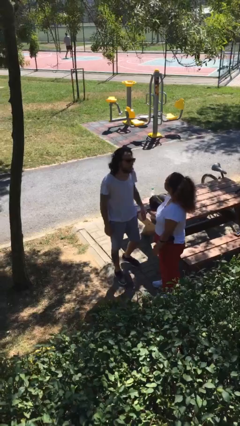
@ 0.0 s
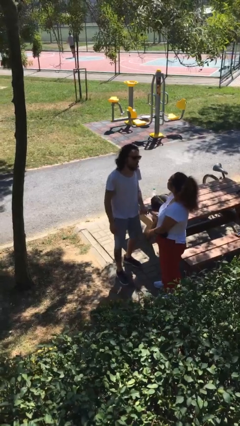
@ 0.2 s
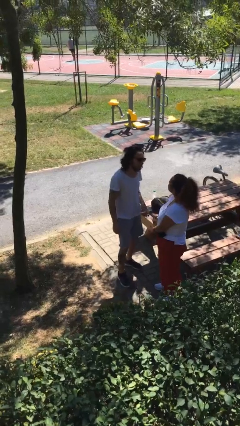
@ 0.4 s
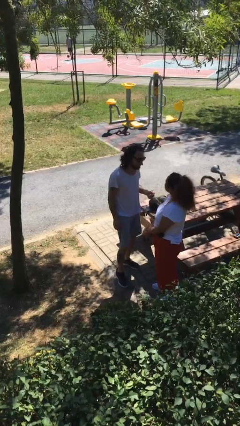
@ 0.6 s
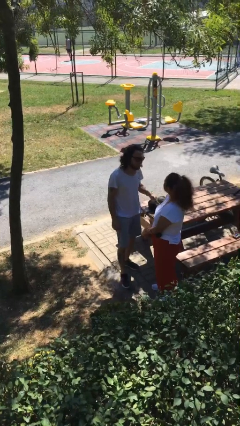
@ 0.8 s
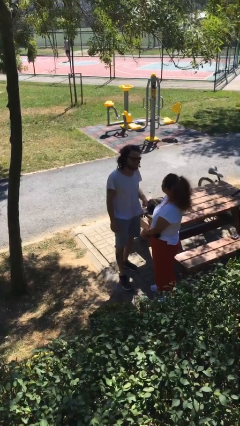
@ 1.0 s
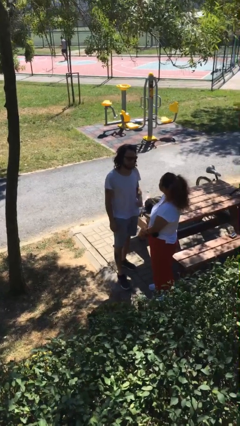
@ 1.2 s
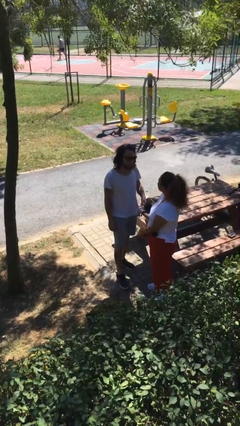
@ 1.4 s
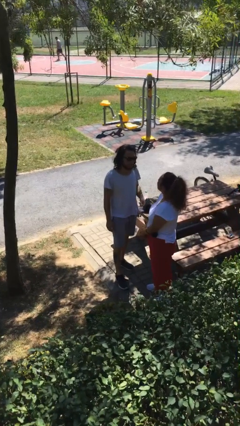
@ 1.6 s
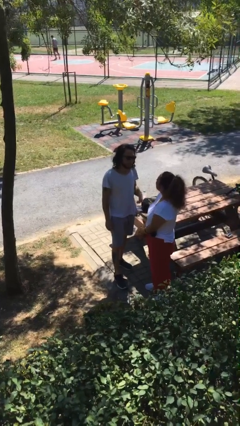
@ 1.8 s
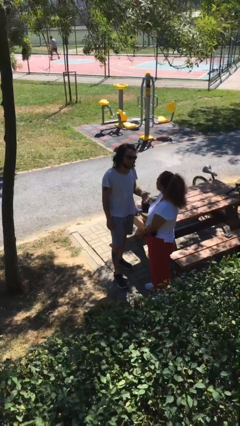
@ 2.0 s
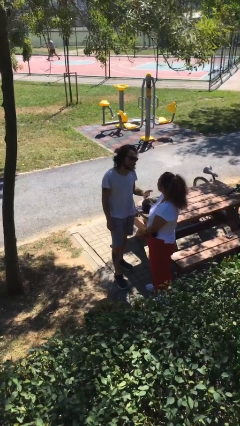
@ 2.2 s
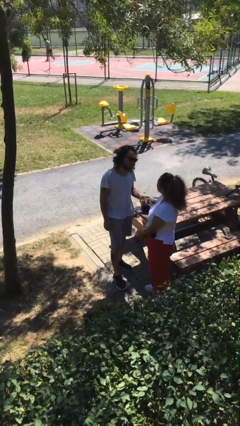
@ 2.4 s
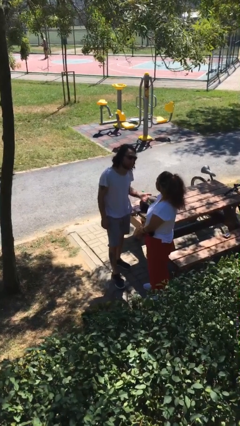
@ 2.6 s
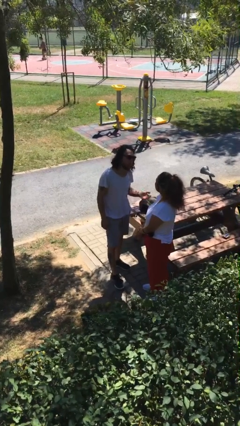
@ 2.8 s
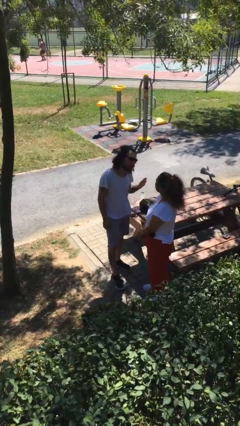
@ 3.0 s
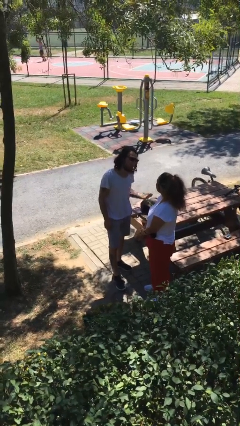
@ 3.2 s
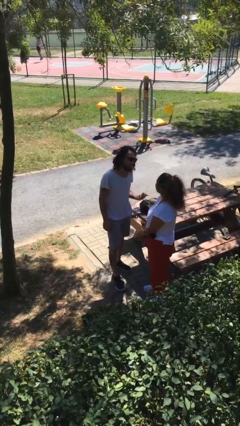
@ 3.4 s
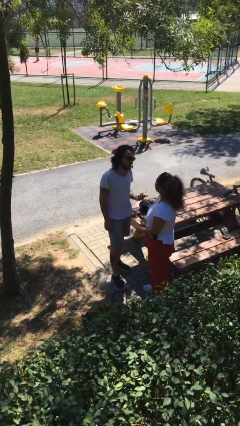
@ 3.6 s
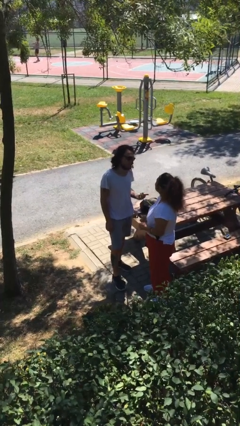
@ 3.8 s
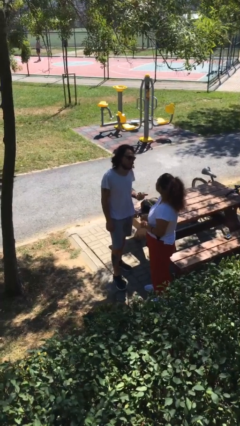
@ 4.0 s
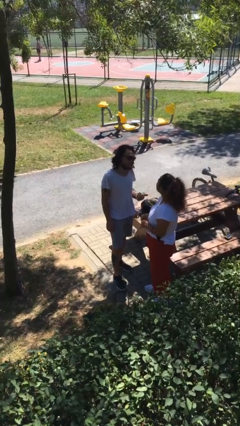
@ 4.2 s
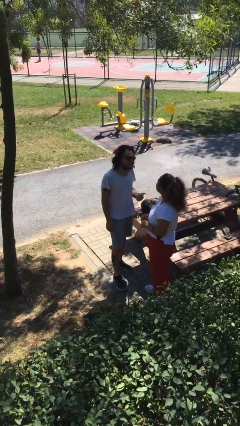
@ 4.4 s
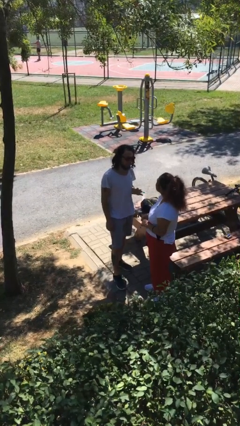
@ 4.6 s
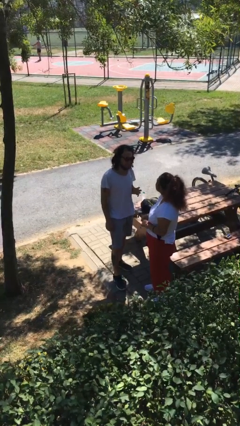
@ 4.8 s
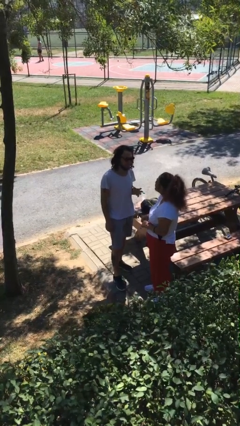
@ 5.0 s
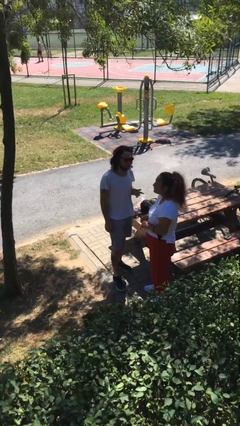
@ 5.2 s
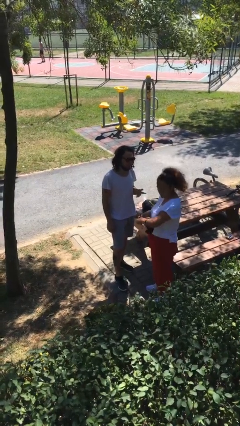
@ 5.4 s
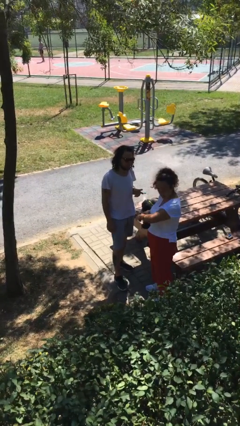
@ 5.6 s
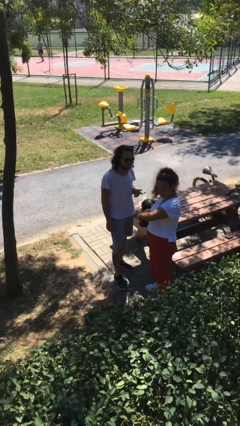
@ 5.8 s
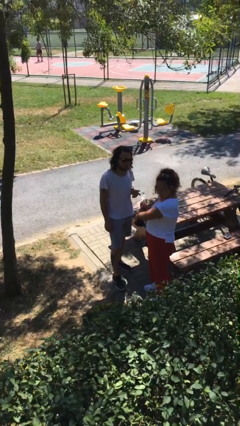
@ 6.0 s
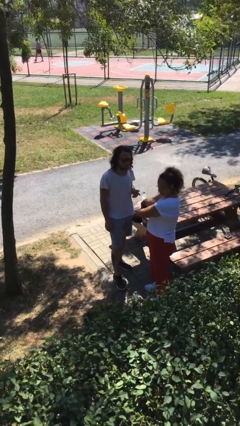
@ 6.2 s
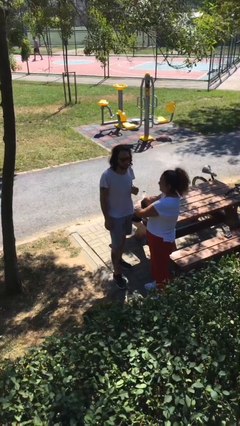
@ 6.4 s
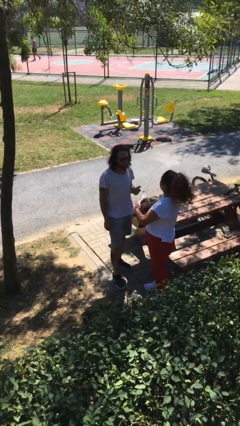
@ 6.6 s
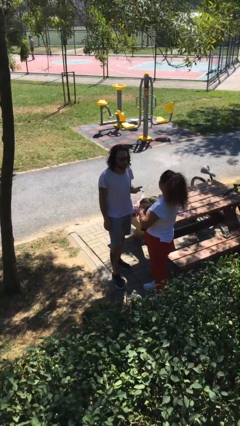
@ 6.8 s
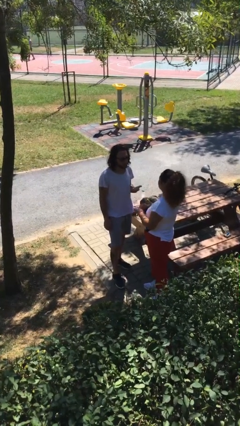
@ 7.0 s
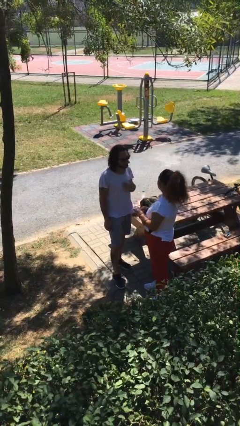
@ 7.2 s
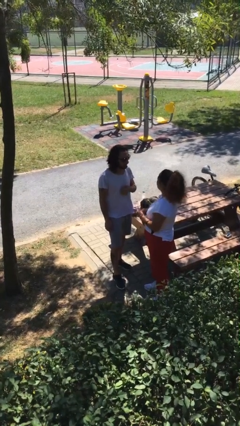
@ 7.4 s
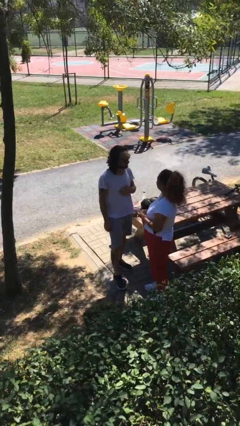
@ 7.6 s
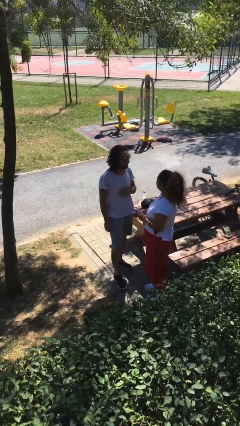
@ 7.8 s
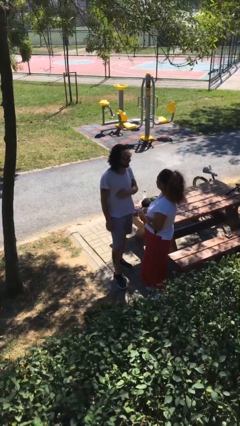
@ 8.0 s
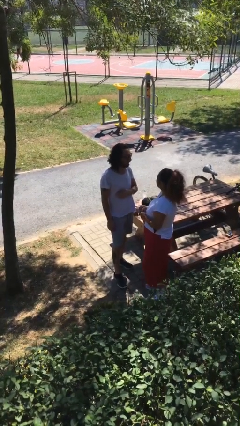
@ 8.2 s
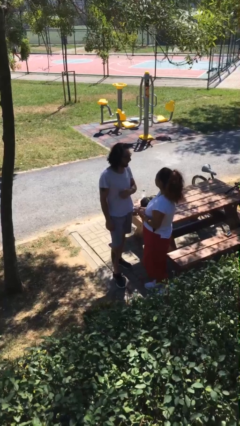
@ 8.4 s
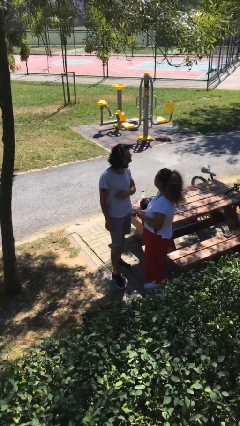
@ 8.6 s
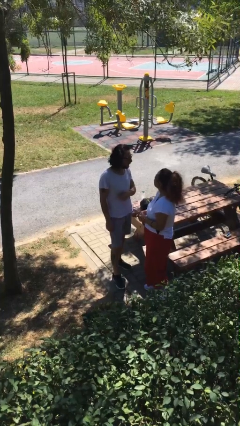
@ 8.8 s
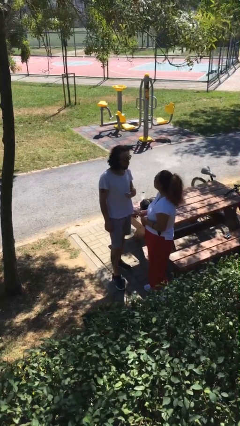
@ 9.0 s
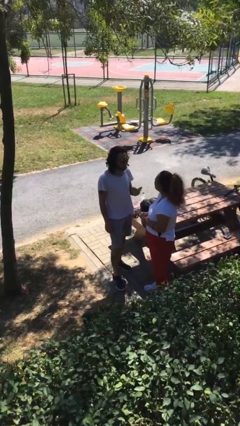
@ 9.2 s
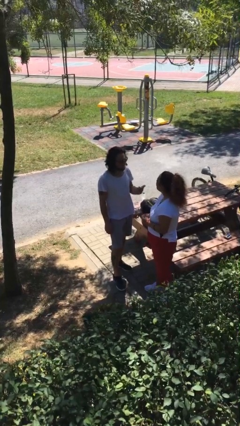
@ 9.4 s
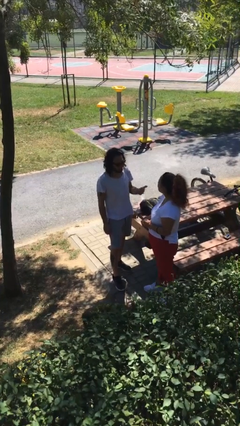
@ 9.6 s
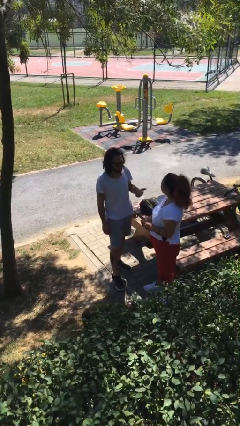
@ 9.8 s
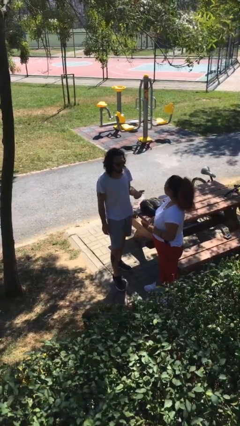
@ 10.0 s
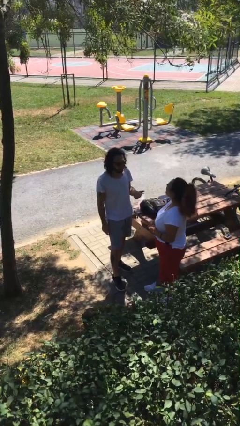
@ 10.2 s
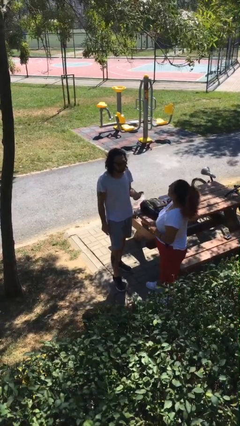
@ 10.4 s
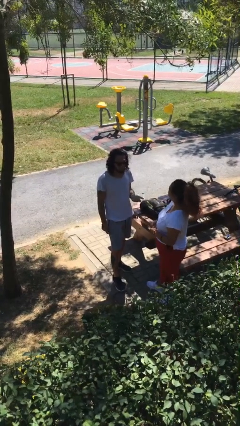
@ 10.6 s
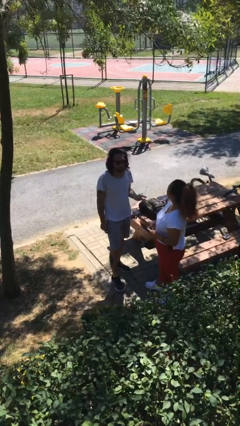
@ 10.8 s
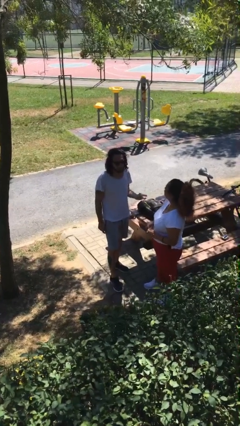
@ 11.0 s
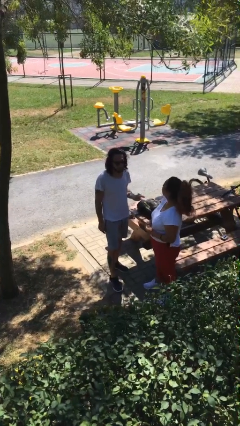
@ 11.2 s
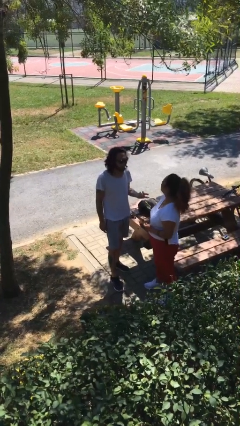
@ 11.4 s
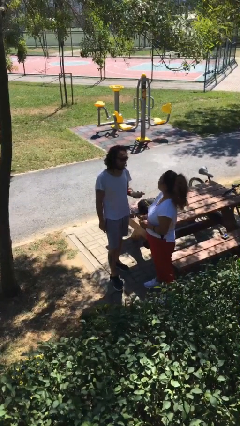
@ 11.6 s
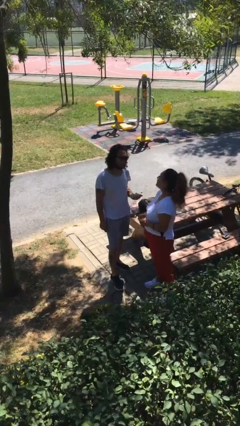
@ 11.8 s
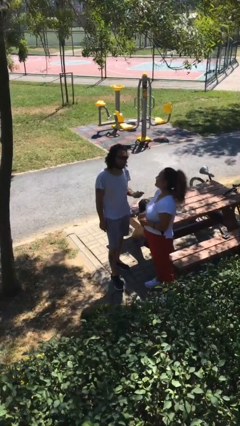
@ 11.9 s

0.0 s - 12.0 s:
person talks to person

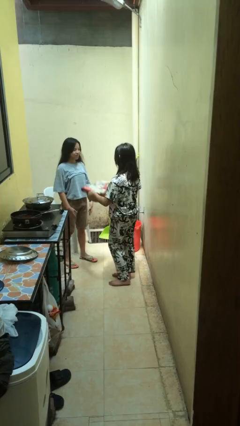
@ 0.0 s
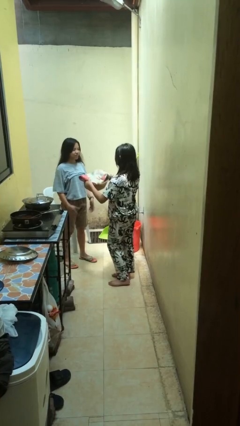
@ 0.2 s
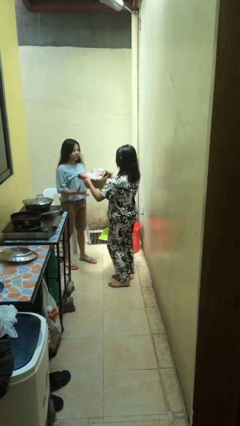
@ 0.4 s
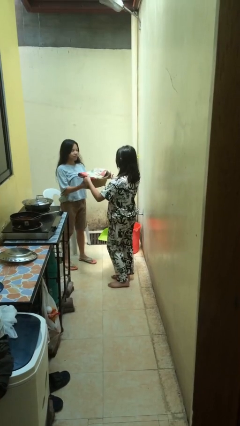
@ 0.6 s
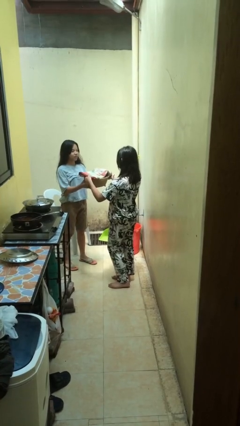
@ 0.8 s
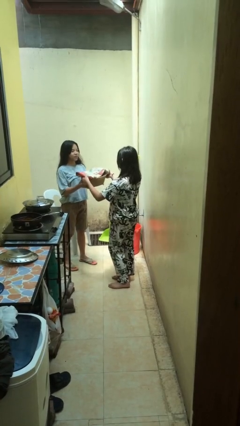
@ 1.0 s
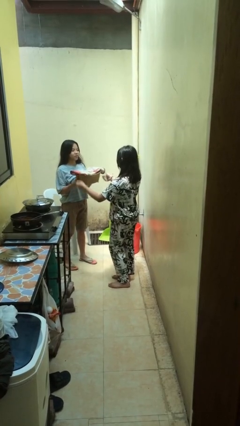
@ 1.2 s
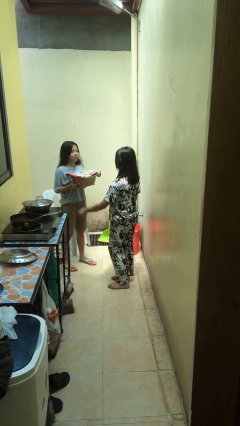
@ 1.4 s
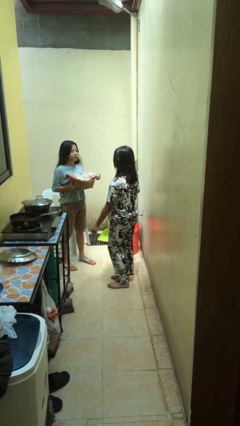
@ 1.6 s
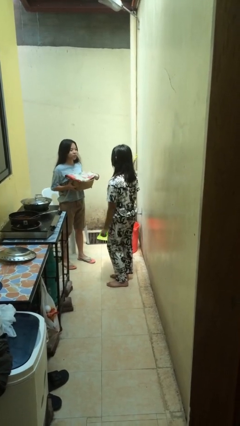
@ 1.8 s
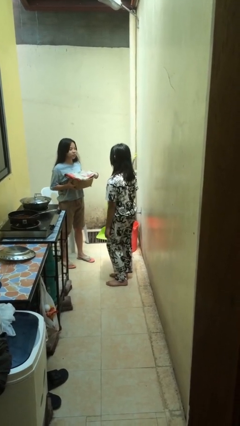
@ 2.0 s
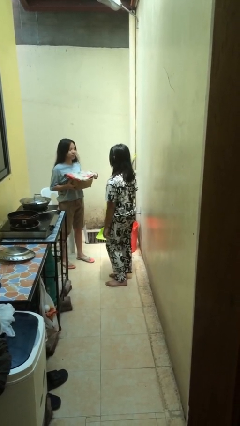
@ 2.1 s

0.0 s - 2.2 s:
person transfers object to person

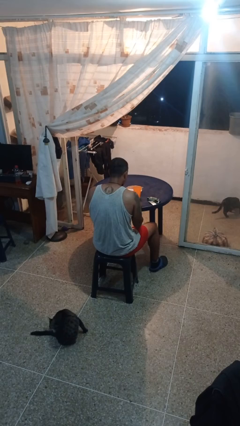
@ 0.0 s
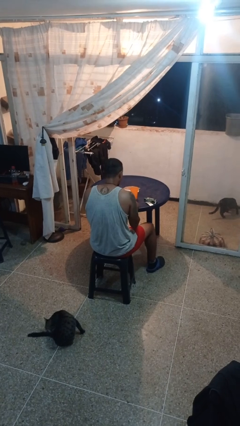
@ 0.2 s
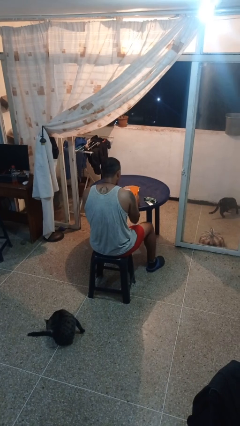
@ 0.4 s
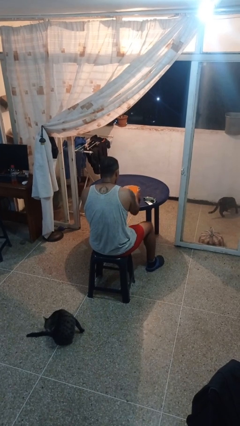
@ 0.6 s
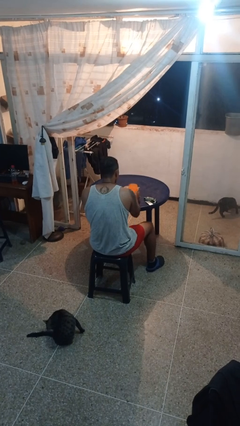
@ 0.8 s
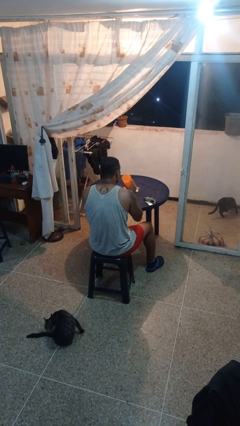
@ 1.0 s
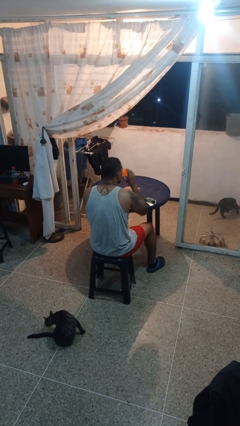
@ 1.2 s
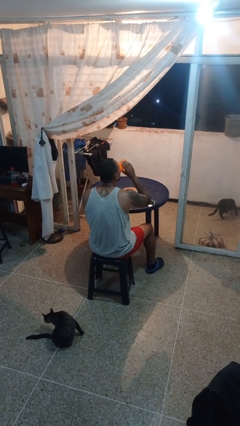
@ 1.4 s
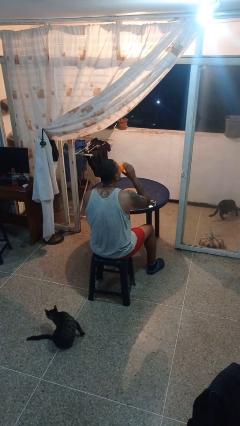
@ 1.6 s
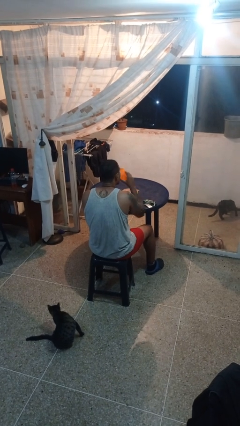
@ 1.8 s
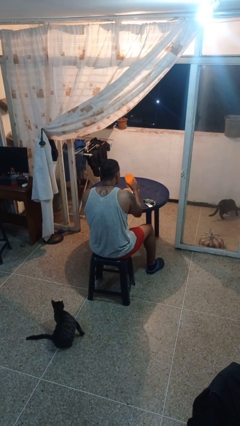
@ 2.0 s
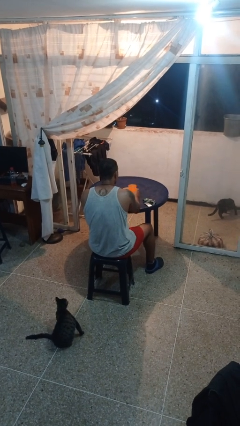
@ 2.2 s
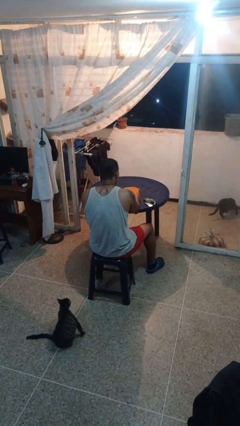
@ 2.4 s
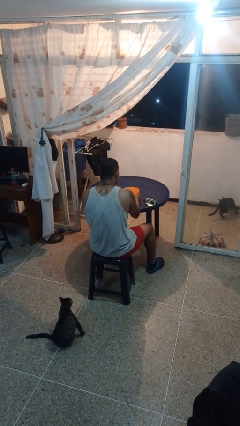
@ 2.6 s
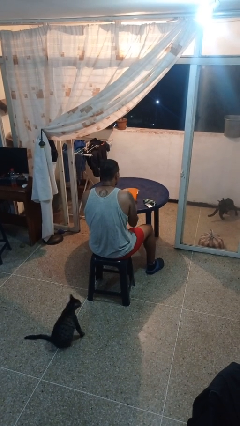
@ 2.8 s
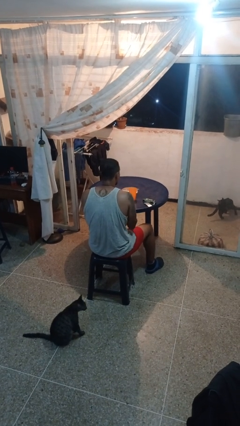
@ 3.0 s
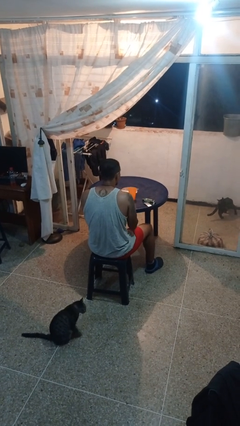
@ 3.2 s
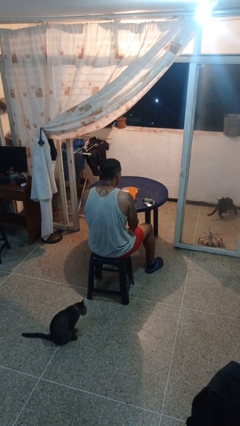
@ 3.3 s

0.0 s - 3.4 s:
person drinks from cup

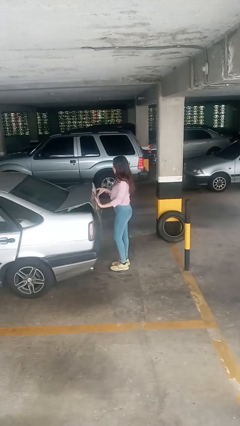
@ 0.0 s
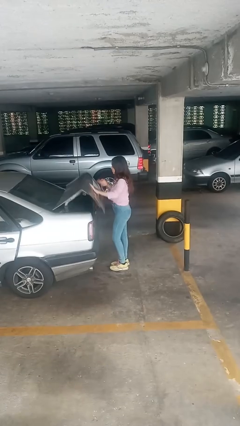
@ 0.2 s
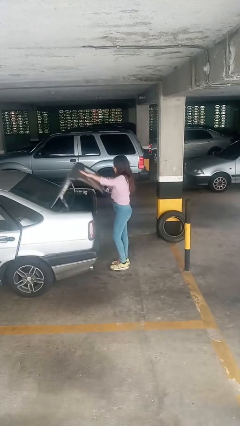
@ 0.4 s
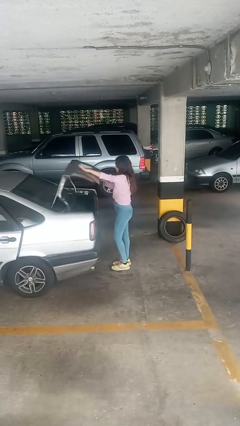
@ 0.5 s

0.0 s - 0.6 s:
person opens car trunk
